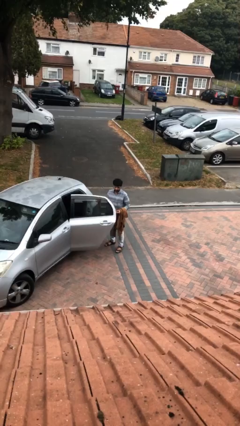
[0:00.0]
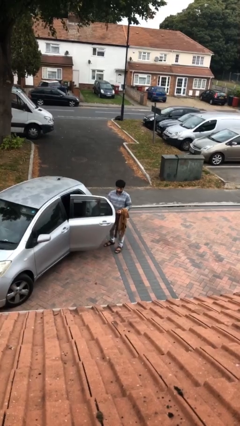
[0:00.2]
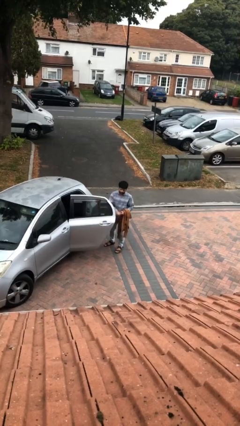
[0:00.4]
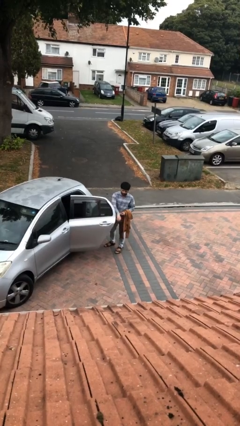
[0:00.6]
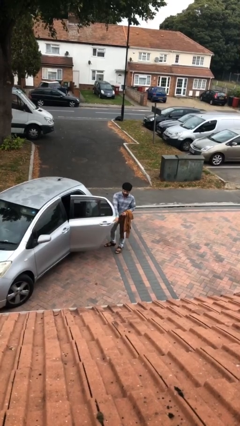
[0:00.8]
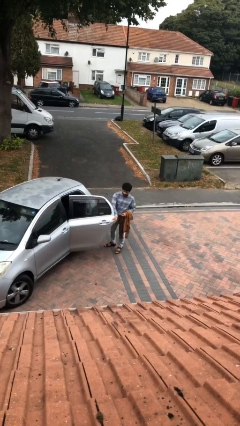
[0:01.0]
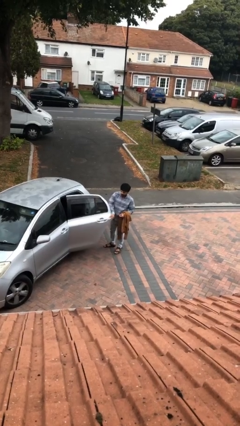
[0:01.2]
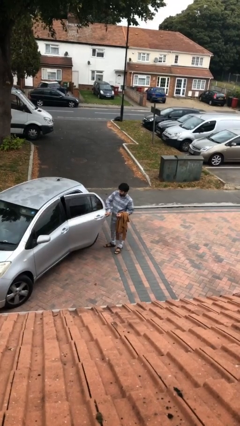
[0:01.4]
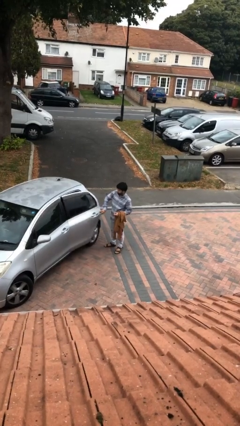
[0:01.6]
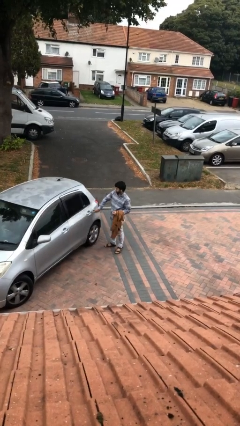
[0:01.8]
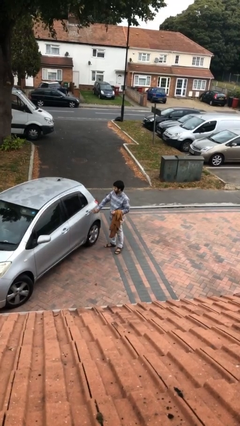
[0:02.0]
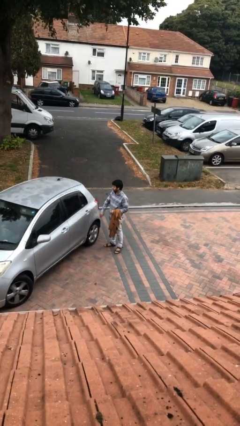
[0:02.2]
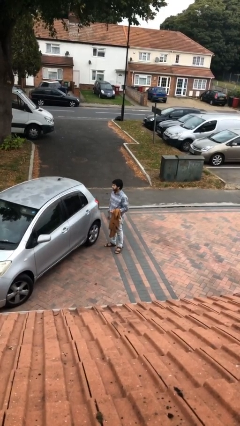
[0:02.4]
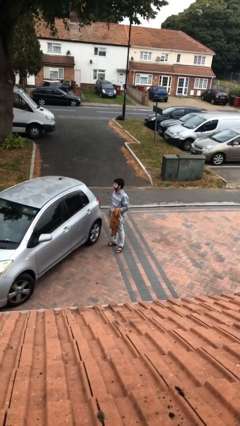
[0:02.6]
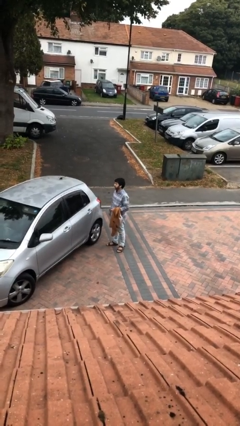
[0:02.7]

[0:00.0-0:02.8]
person closes car door

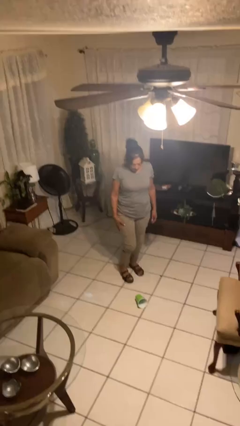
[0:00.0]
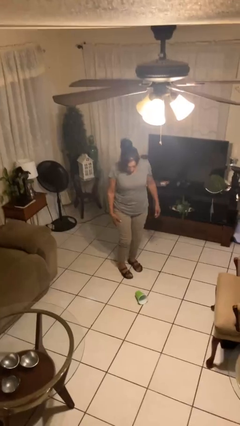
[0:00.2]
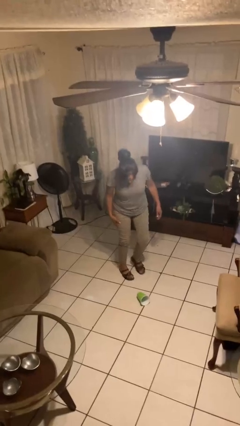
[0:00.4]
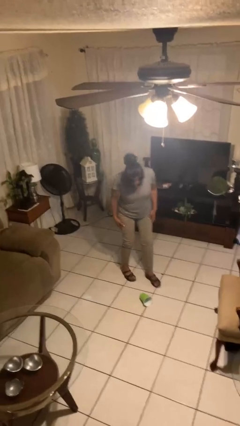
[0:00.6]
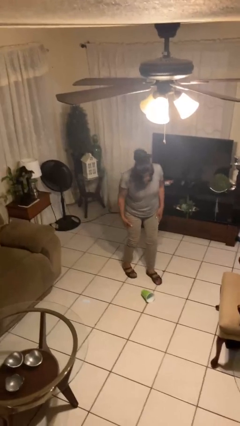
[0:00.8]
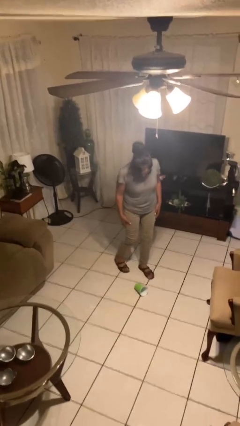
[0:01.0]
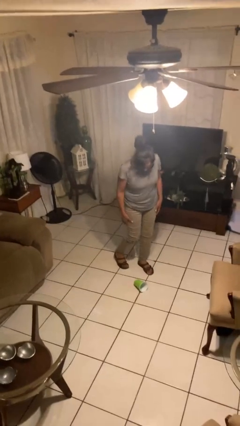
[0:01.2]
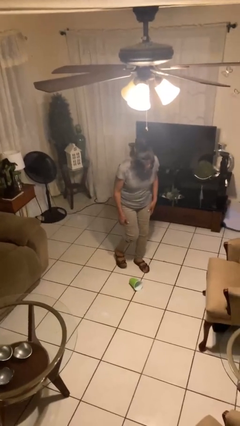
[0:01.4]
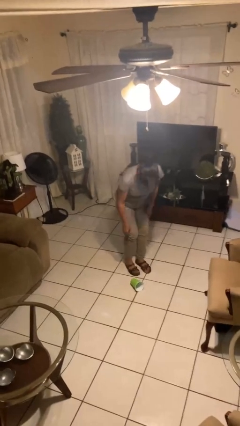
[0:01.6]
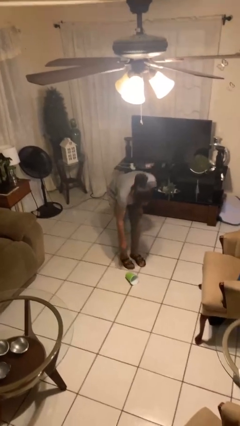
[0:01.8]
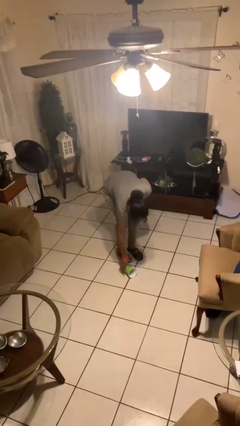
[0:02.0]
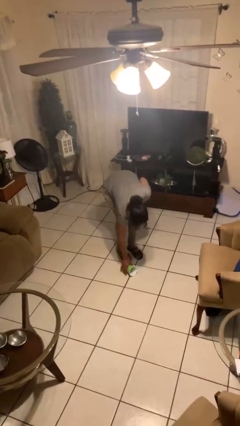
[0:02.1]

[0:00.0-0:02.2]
person spills on floor

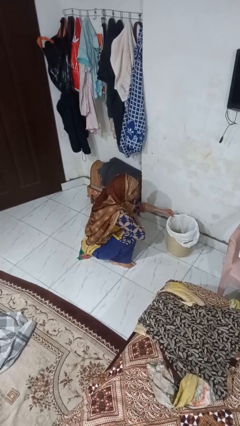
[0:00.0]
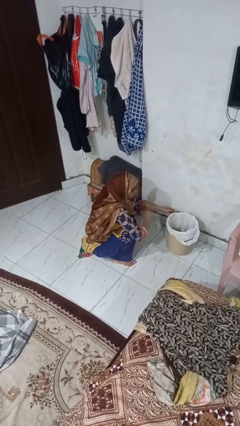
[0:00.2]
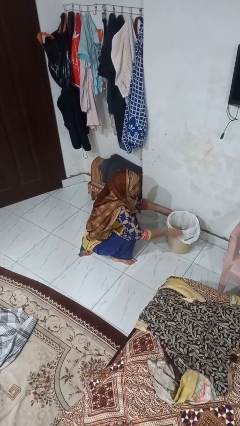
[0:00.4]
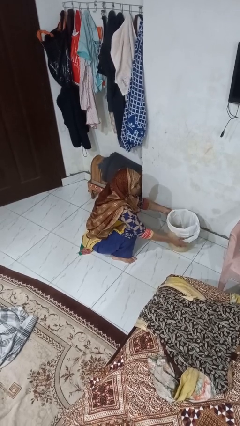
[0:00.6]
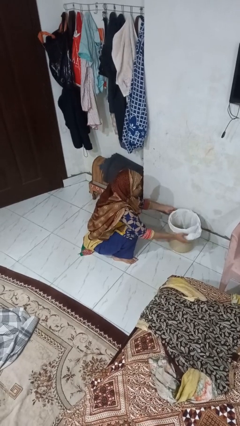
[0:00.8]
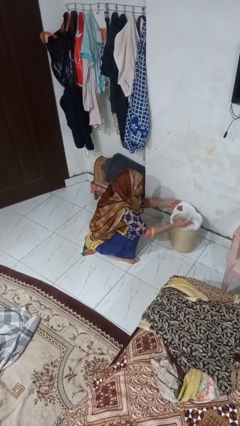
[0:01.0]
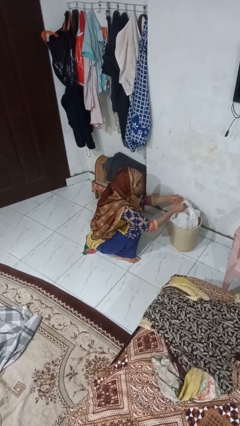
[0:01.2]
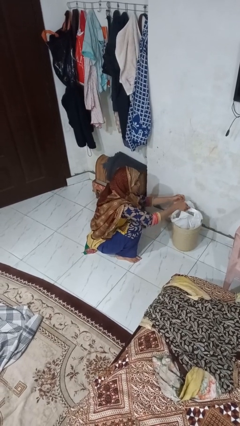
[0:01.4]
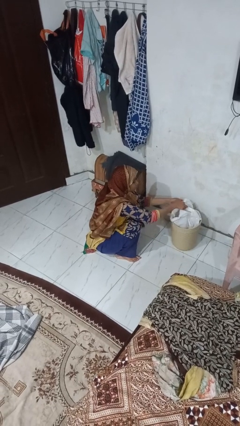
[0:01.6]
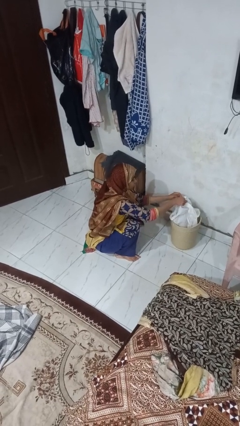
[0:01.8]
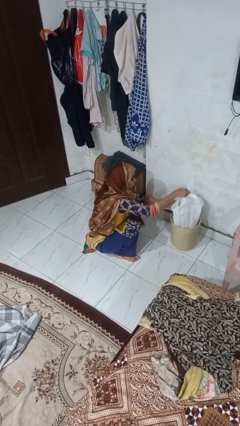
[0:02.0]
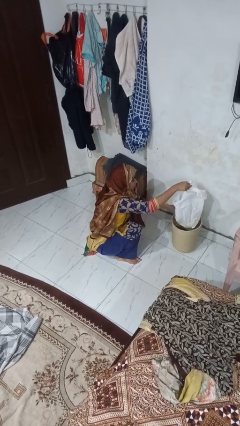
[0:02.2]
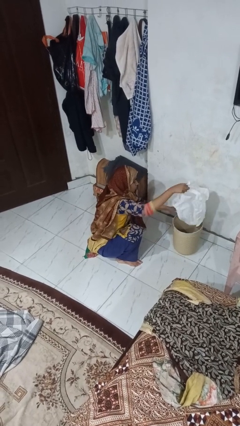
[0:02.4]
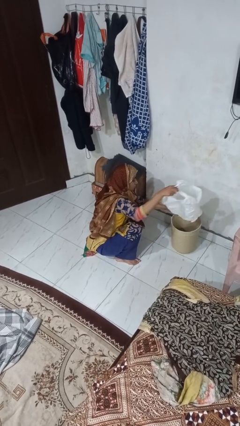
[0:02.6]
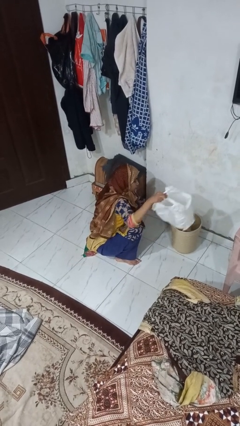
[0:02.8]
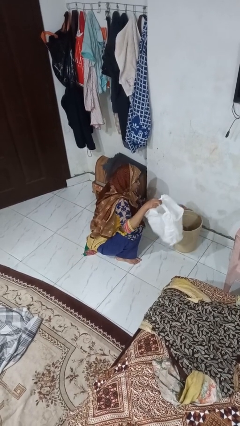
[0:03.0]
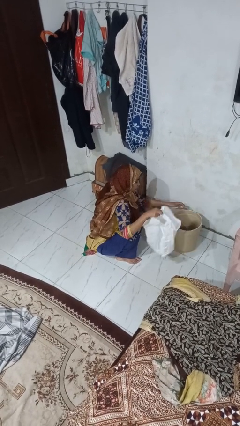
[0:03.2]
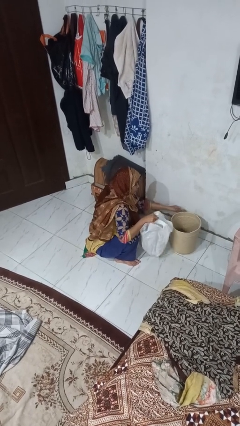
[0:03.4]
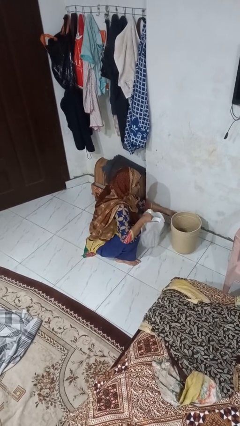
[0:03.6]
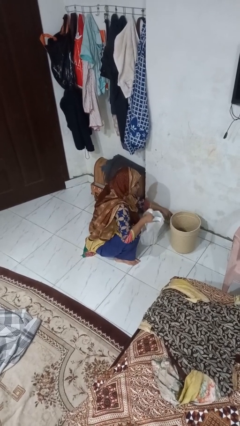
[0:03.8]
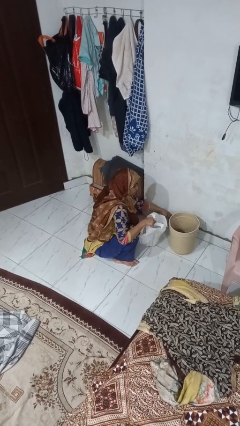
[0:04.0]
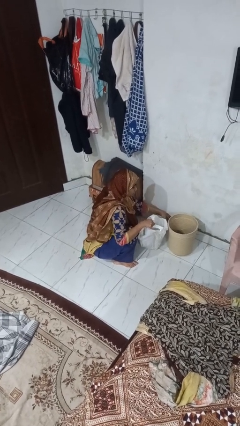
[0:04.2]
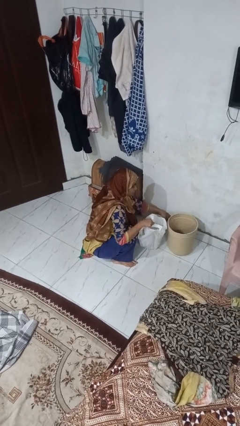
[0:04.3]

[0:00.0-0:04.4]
person removes trashbag from trashcan

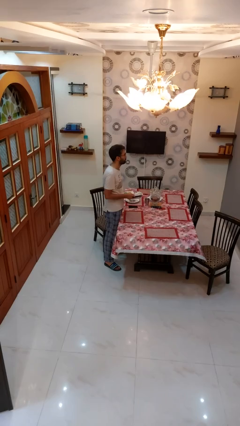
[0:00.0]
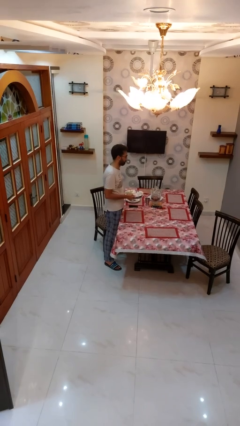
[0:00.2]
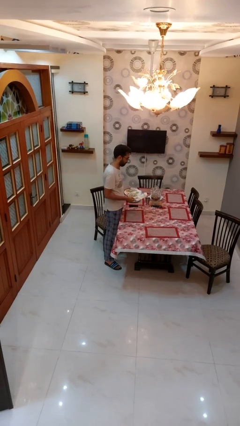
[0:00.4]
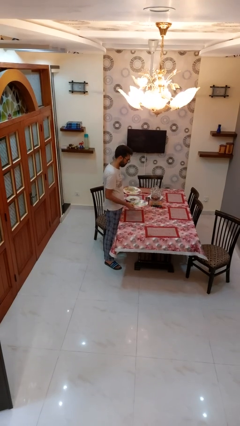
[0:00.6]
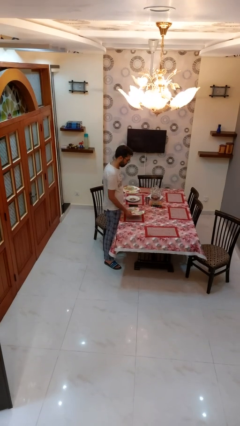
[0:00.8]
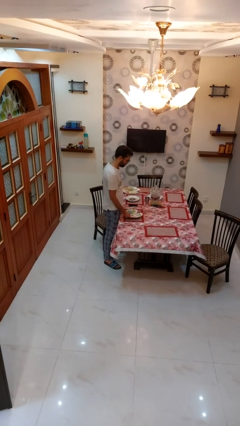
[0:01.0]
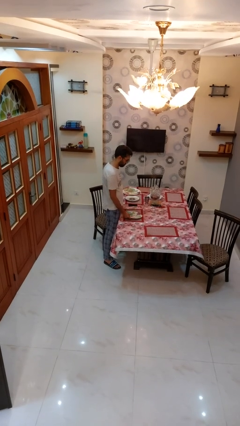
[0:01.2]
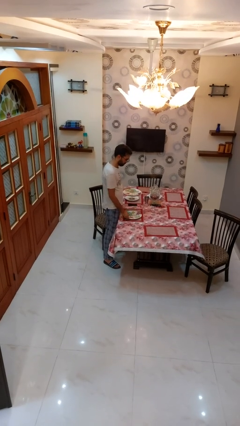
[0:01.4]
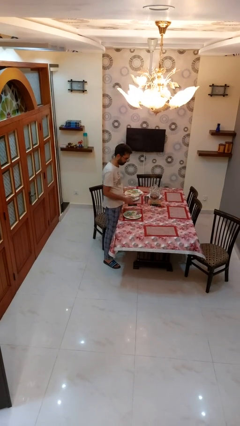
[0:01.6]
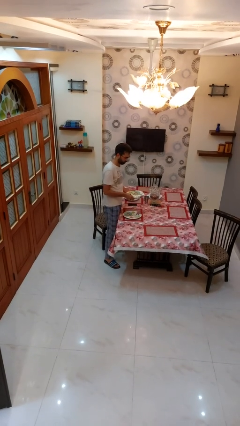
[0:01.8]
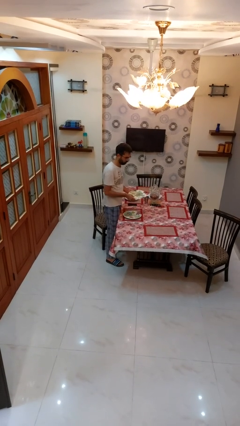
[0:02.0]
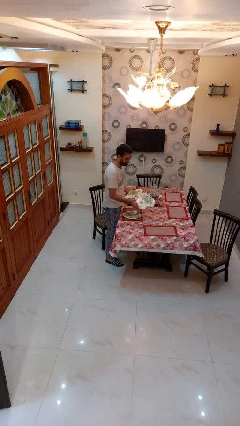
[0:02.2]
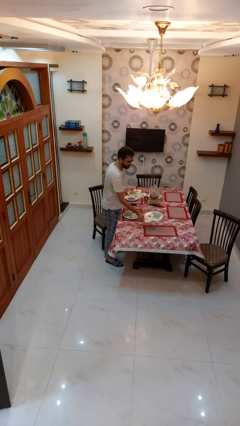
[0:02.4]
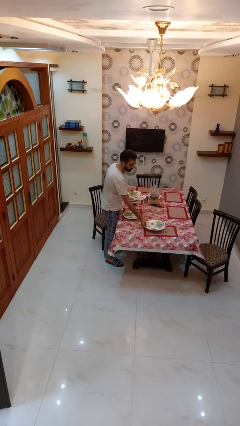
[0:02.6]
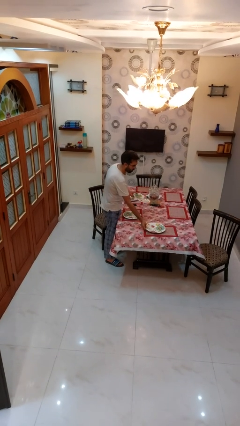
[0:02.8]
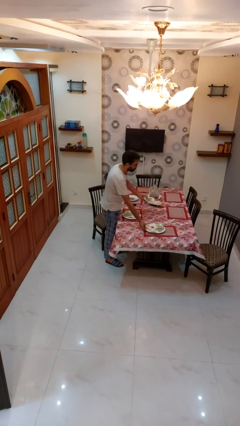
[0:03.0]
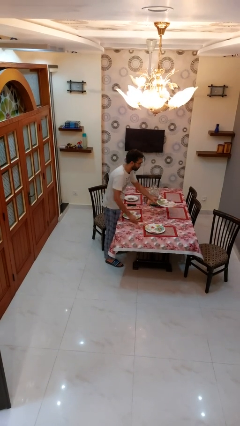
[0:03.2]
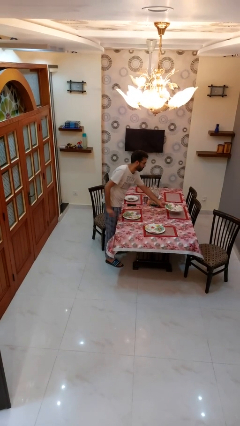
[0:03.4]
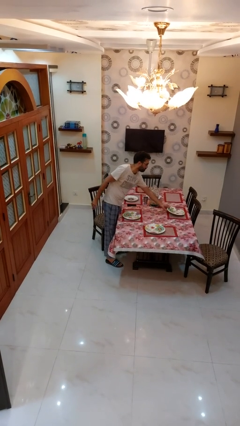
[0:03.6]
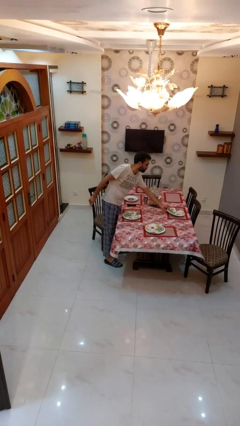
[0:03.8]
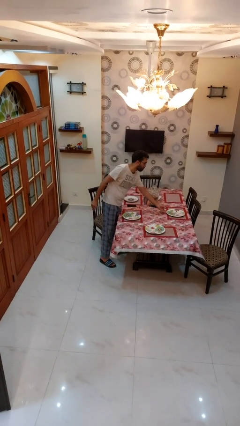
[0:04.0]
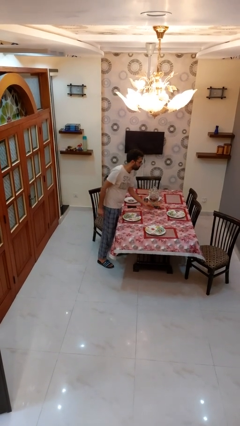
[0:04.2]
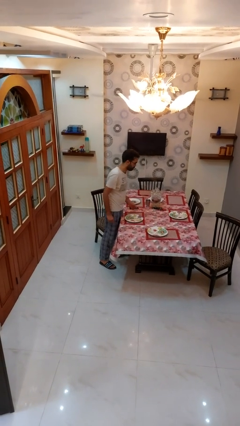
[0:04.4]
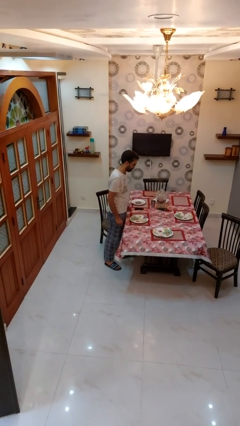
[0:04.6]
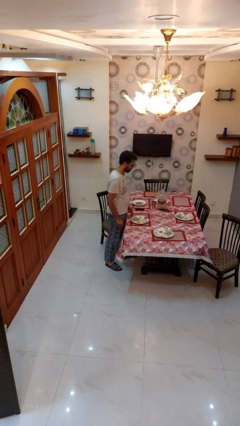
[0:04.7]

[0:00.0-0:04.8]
person sets table

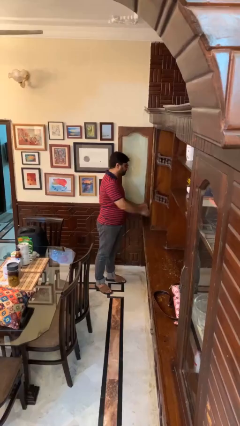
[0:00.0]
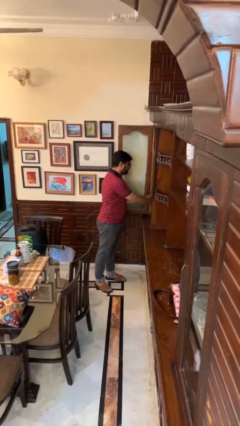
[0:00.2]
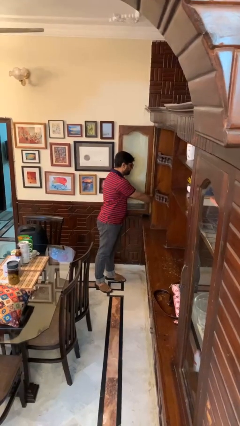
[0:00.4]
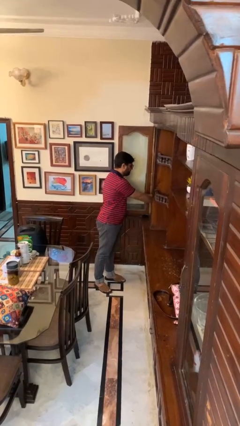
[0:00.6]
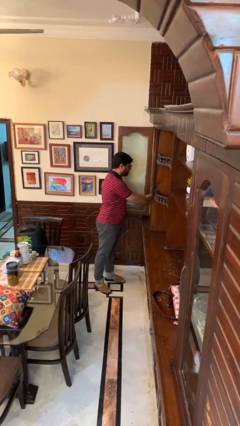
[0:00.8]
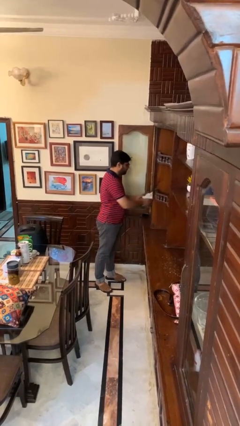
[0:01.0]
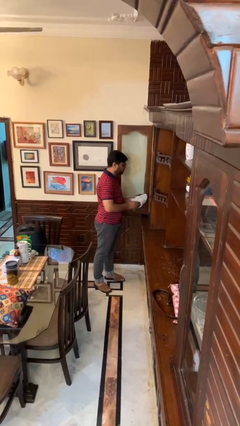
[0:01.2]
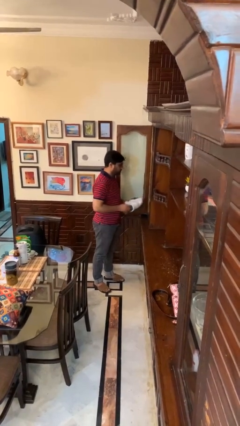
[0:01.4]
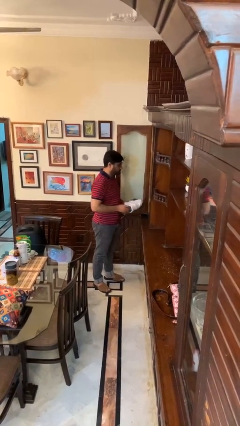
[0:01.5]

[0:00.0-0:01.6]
person takes clothes from dresser

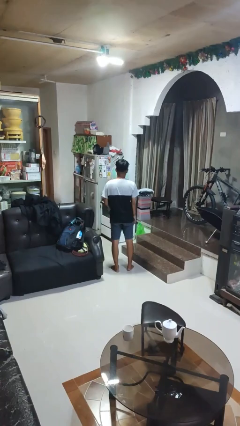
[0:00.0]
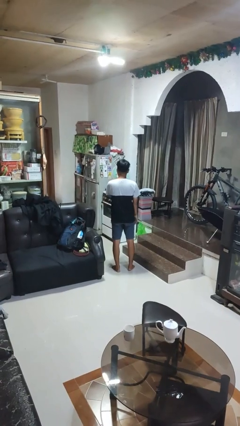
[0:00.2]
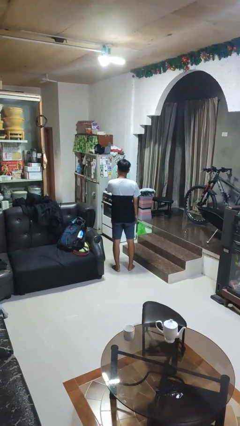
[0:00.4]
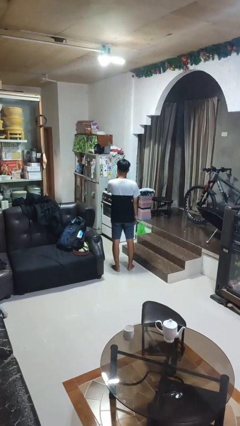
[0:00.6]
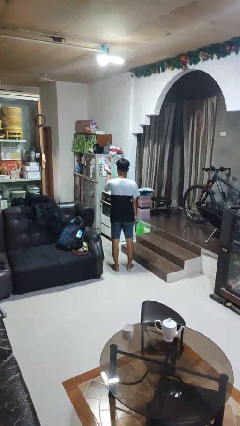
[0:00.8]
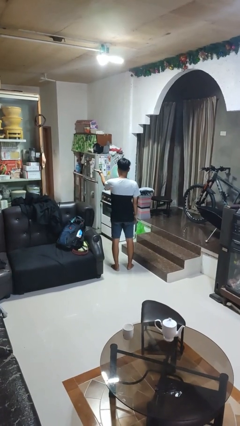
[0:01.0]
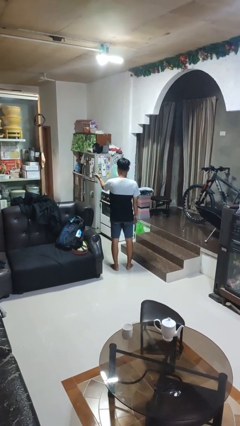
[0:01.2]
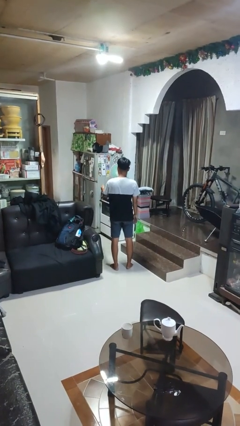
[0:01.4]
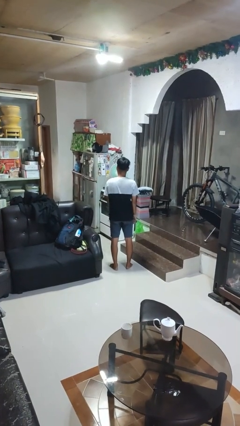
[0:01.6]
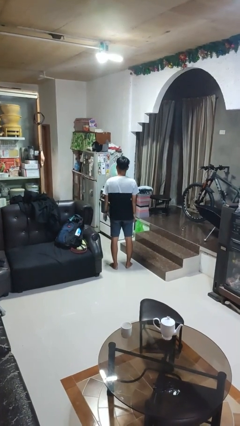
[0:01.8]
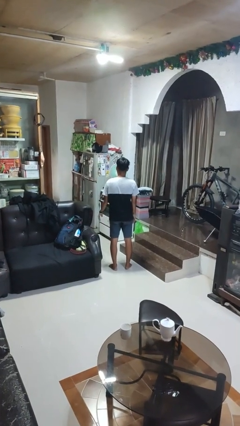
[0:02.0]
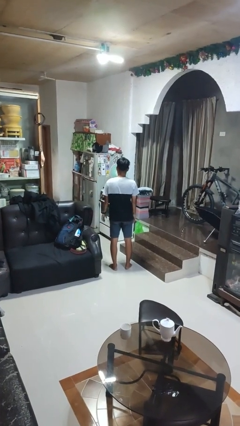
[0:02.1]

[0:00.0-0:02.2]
person gestures blow kiss
